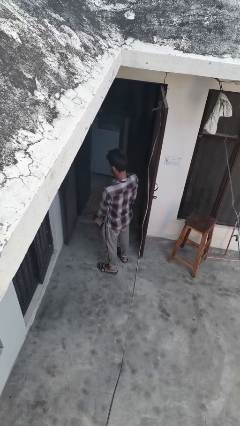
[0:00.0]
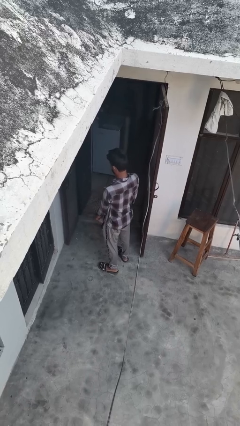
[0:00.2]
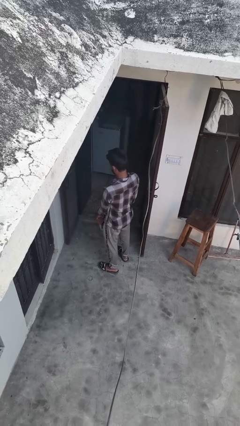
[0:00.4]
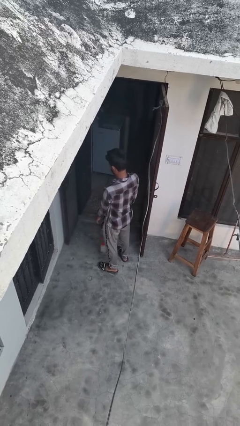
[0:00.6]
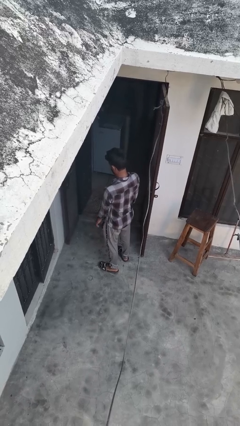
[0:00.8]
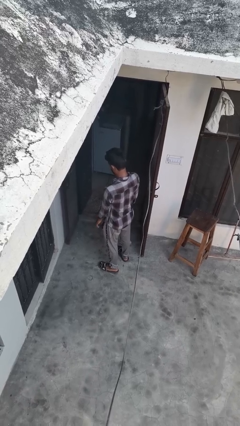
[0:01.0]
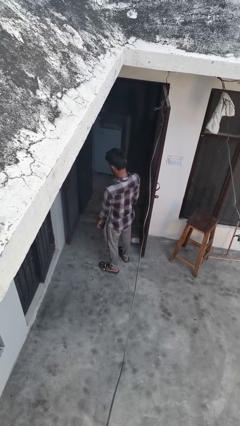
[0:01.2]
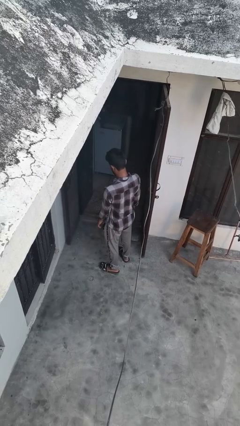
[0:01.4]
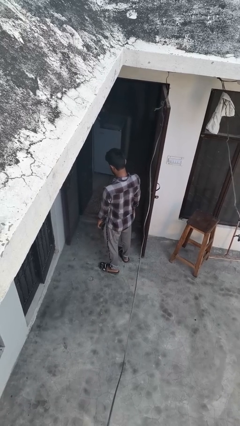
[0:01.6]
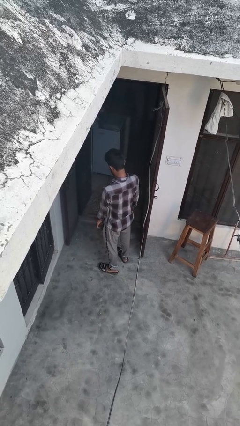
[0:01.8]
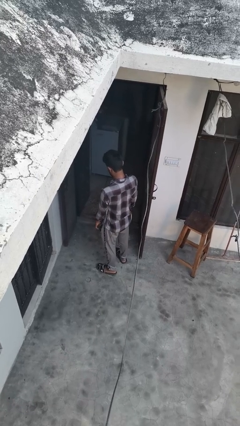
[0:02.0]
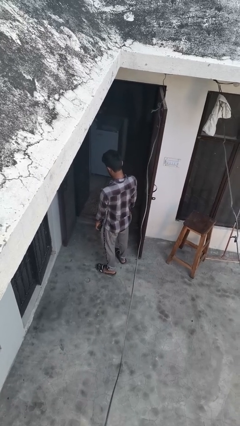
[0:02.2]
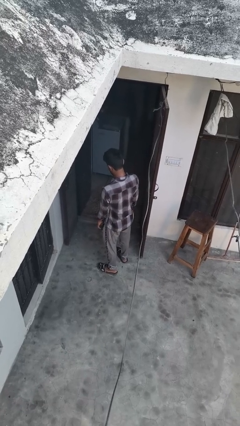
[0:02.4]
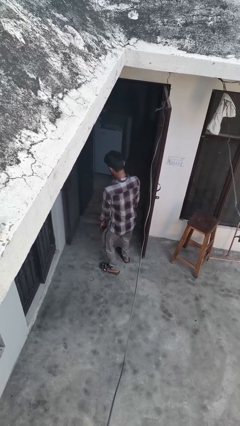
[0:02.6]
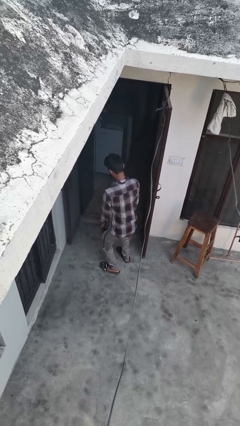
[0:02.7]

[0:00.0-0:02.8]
person drops object

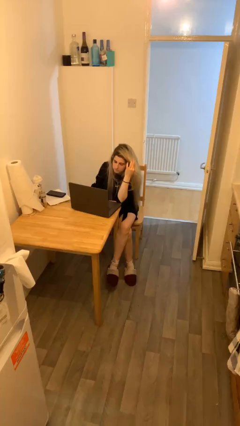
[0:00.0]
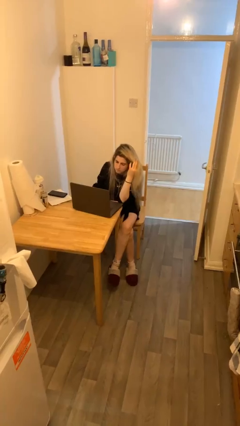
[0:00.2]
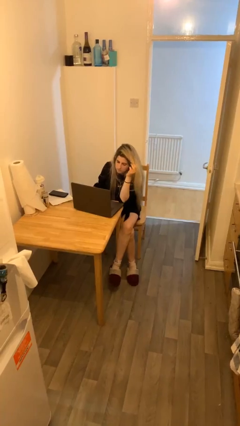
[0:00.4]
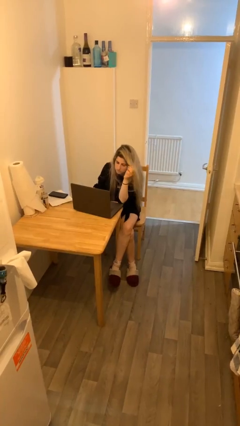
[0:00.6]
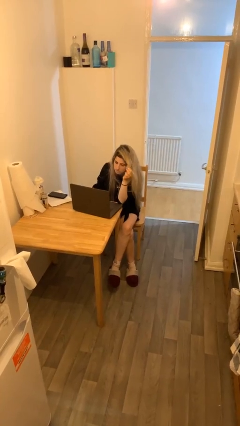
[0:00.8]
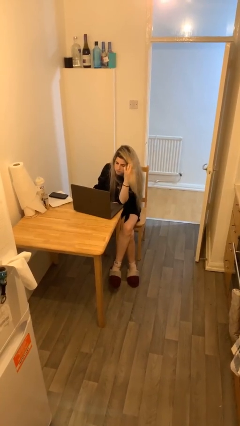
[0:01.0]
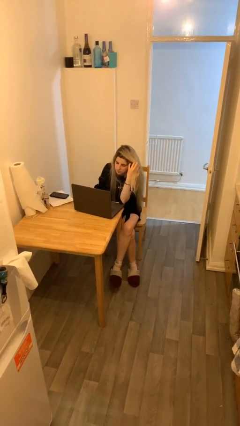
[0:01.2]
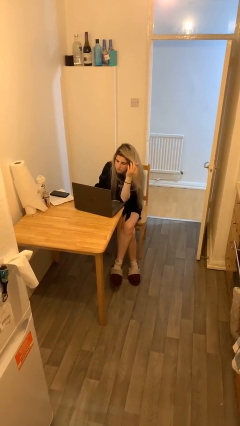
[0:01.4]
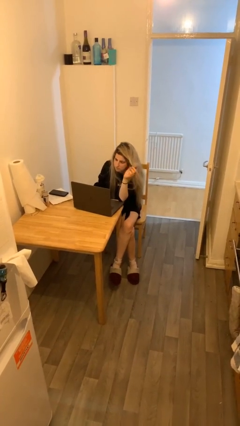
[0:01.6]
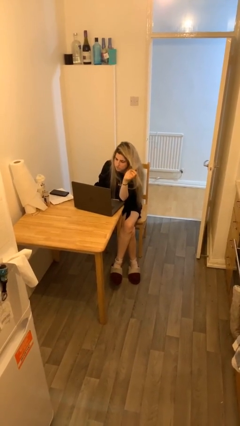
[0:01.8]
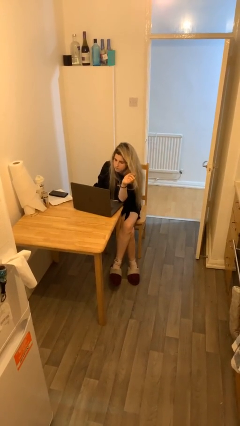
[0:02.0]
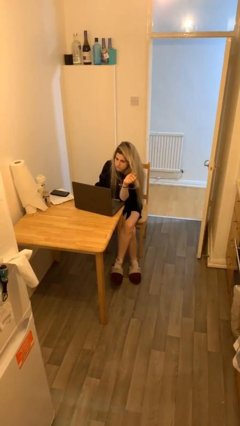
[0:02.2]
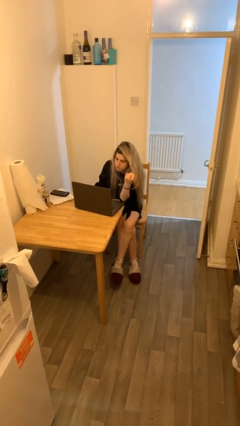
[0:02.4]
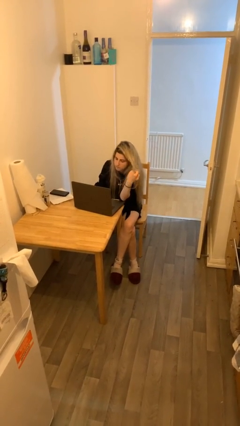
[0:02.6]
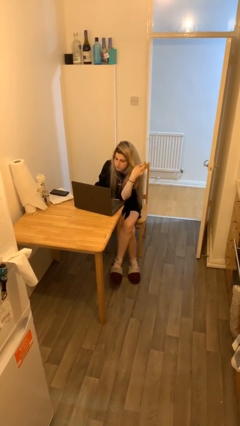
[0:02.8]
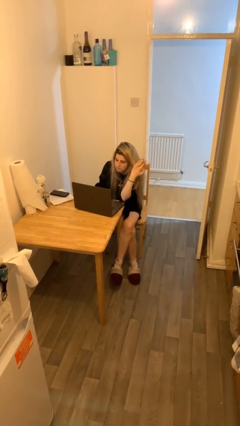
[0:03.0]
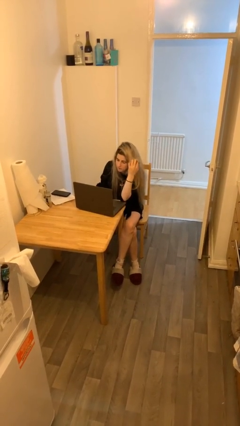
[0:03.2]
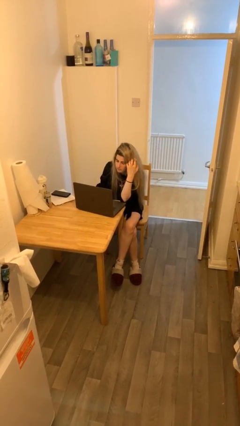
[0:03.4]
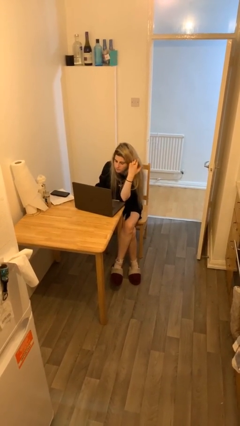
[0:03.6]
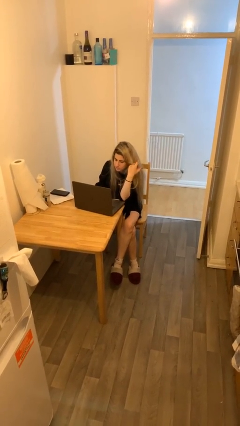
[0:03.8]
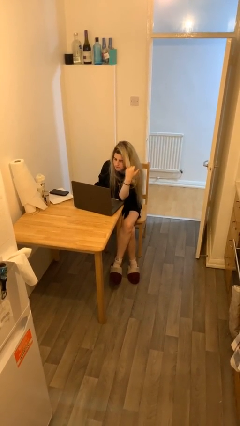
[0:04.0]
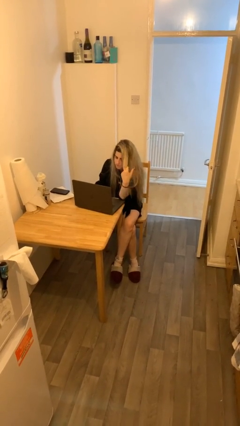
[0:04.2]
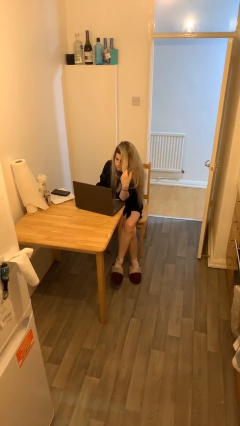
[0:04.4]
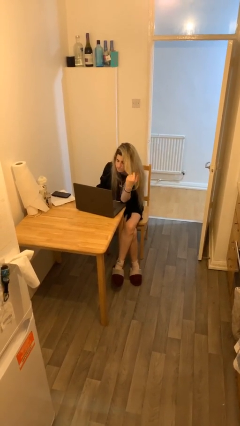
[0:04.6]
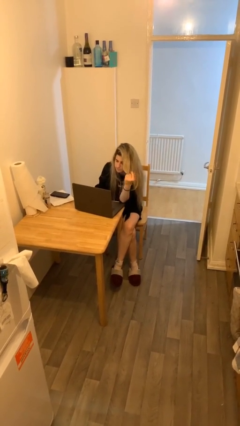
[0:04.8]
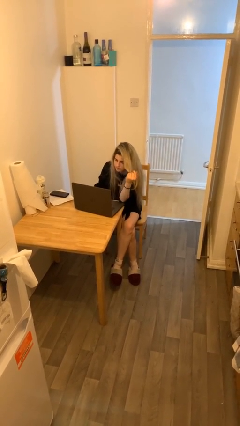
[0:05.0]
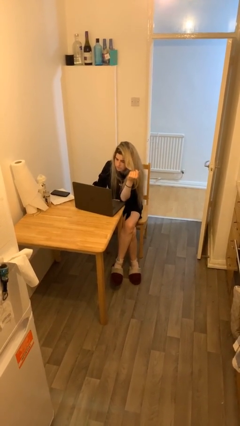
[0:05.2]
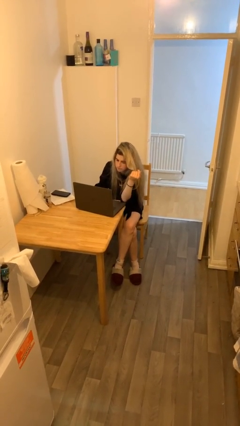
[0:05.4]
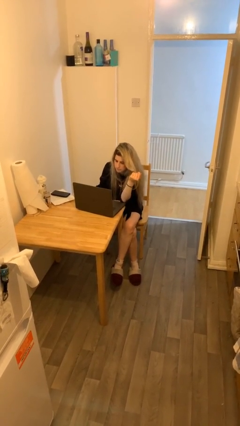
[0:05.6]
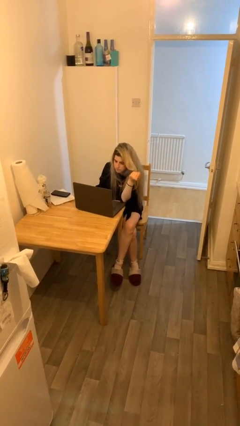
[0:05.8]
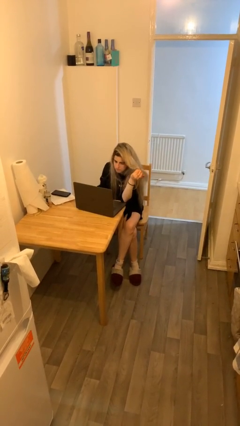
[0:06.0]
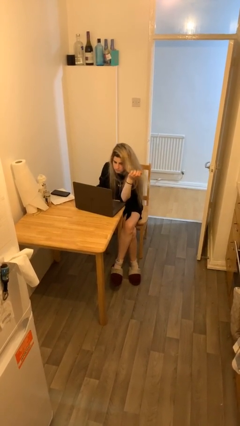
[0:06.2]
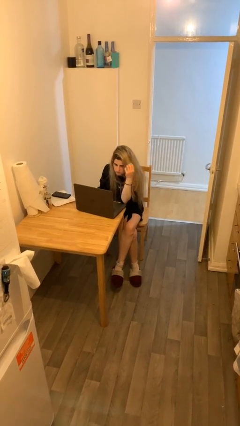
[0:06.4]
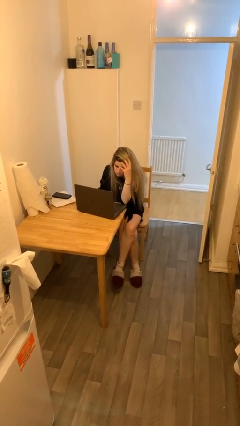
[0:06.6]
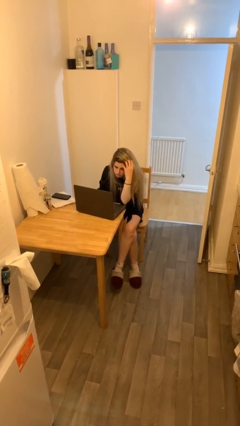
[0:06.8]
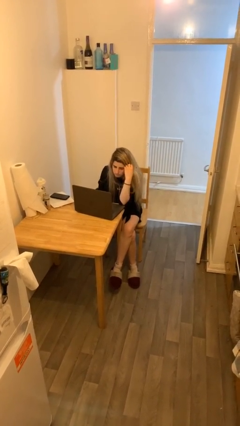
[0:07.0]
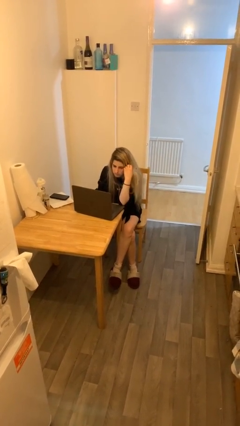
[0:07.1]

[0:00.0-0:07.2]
person interacts with laptop

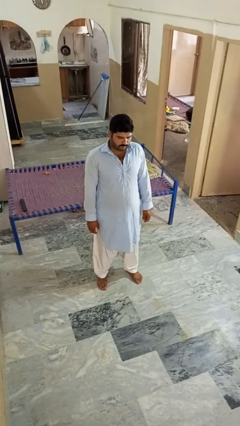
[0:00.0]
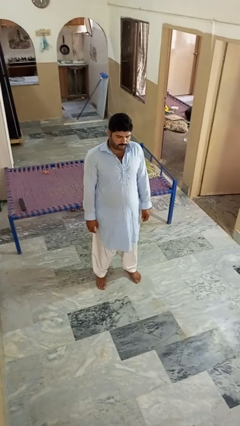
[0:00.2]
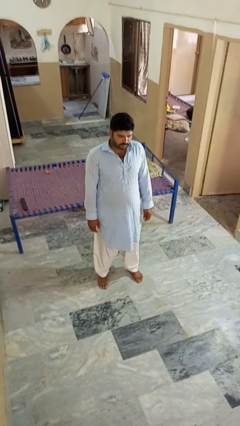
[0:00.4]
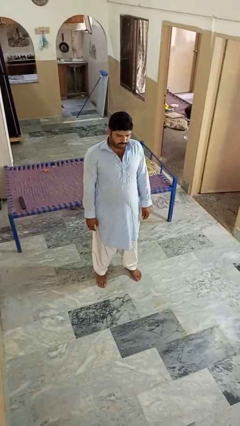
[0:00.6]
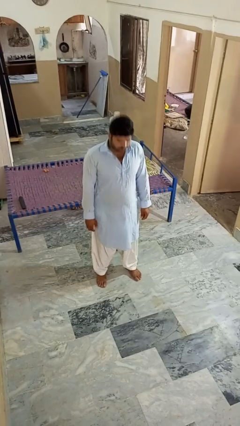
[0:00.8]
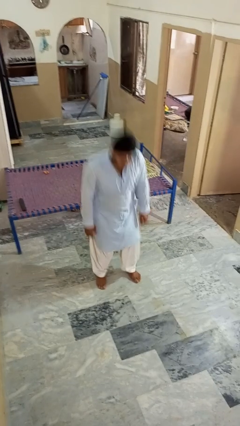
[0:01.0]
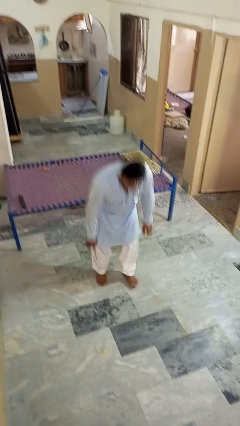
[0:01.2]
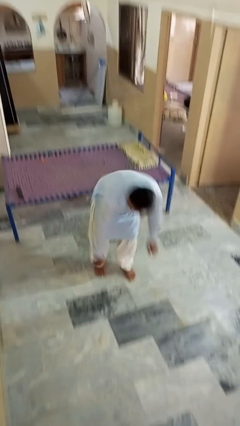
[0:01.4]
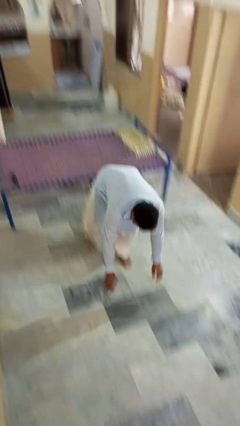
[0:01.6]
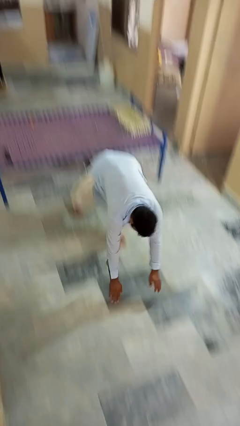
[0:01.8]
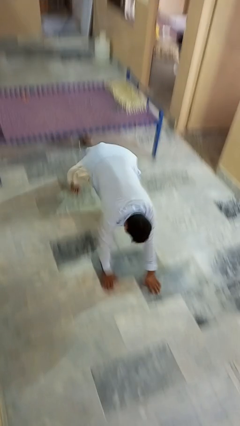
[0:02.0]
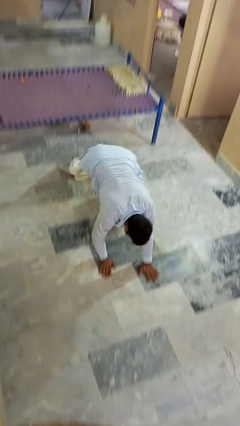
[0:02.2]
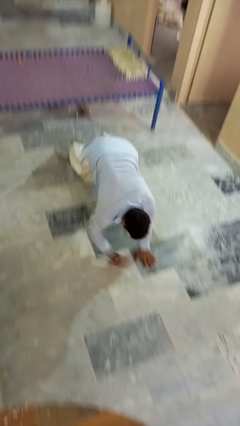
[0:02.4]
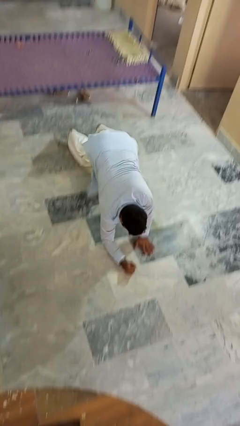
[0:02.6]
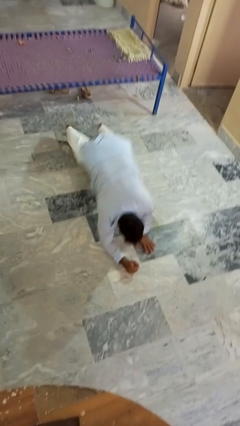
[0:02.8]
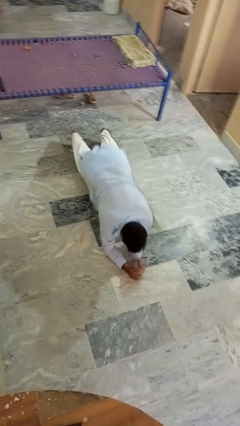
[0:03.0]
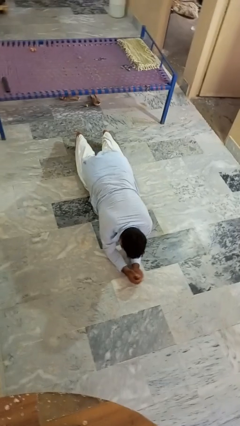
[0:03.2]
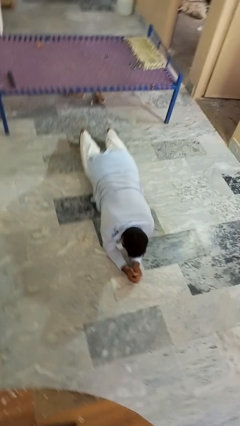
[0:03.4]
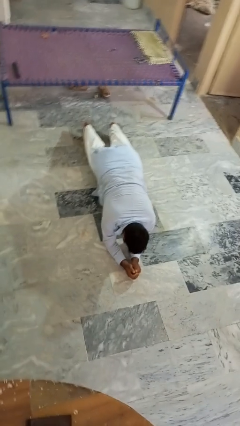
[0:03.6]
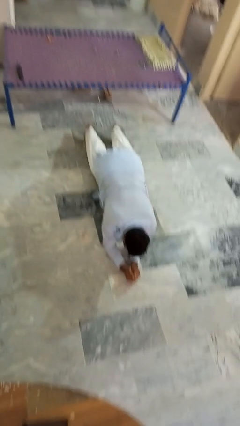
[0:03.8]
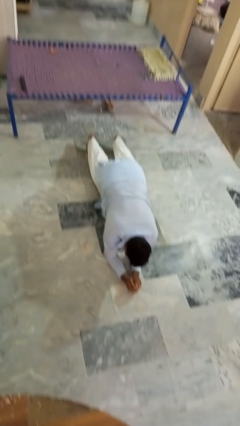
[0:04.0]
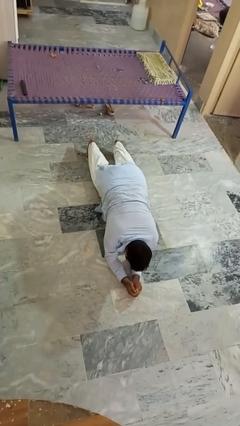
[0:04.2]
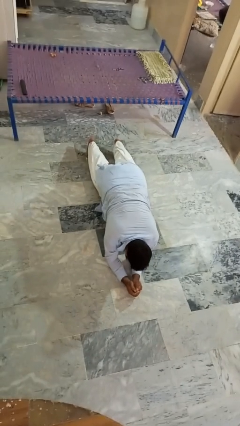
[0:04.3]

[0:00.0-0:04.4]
person exercises with plank

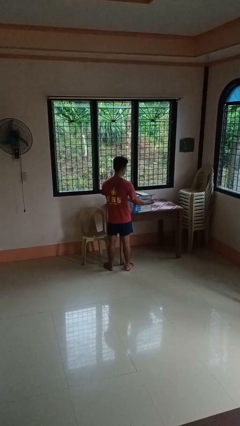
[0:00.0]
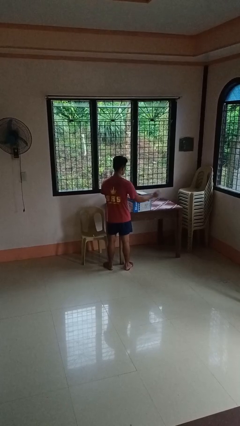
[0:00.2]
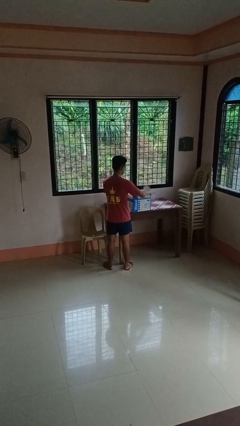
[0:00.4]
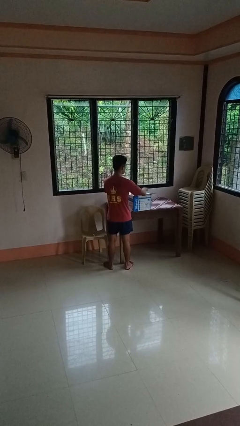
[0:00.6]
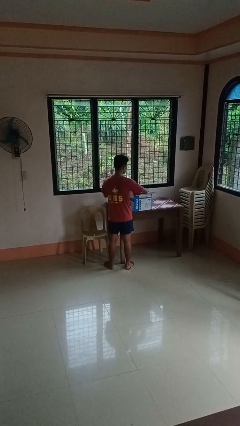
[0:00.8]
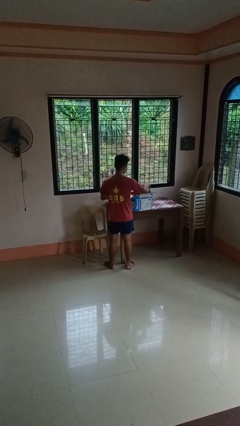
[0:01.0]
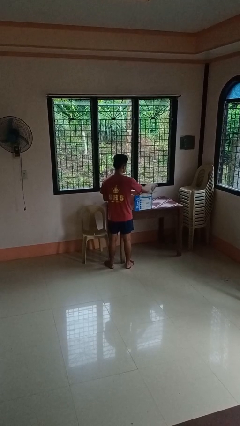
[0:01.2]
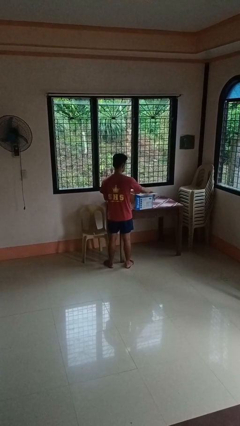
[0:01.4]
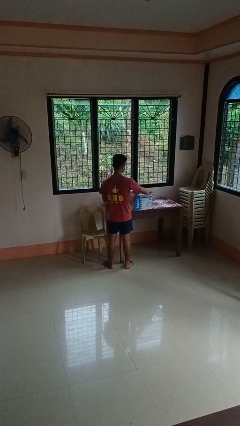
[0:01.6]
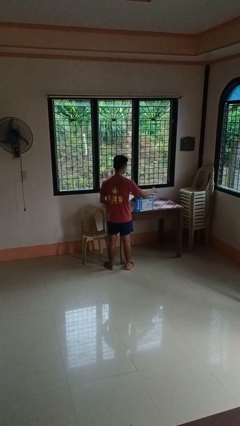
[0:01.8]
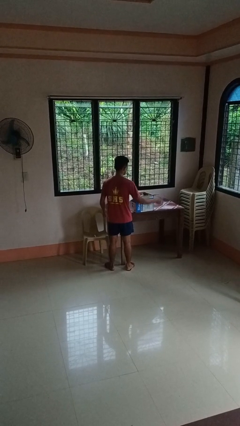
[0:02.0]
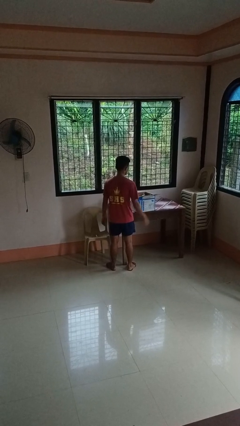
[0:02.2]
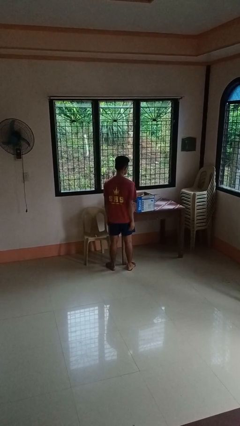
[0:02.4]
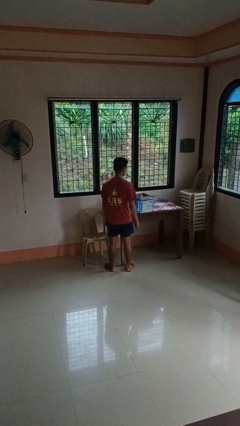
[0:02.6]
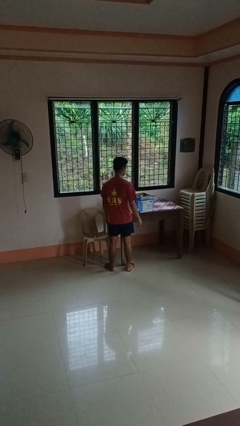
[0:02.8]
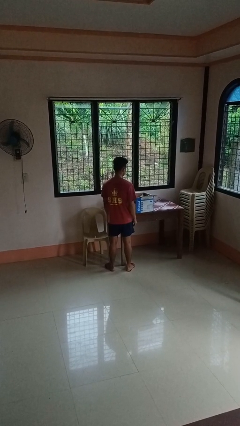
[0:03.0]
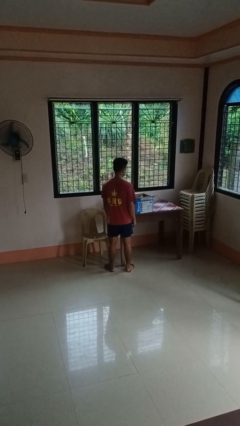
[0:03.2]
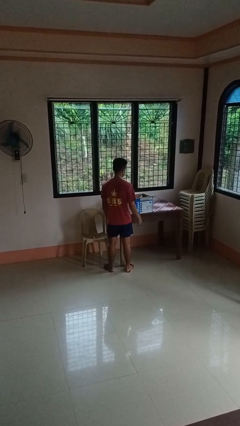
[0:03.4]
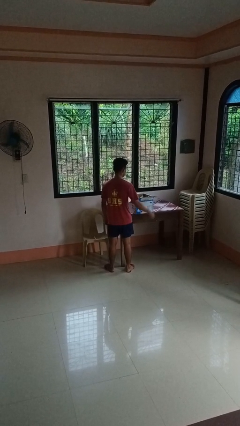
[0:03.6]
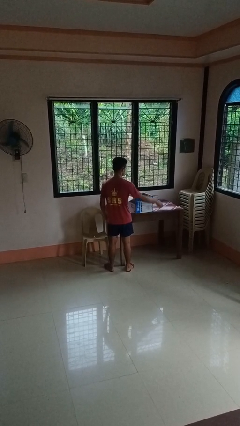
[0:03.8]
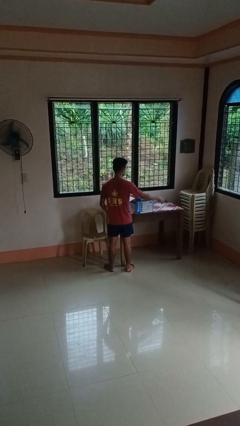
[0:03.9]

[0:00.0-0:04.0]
person opens box
